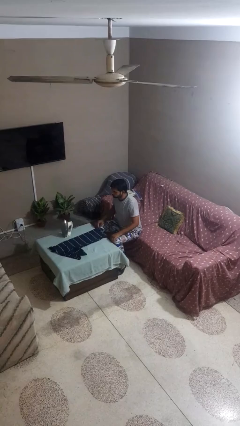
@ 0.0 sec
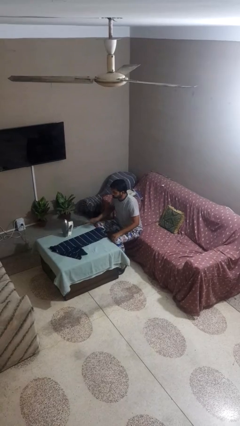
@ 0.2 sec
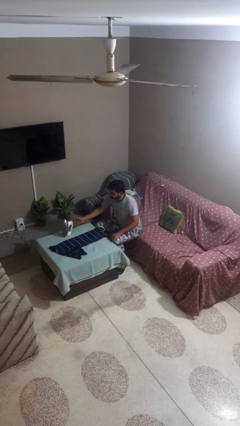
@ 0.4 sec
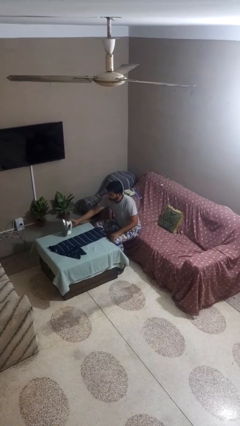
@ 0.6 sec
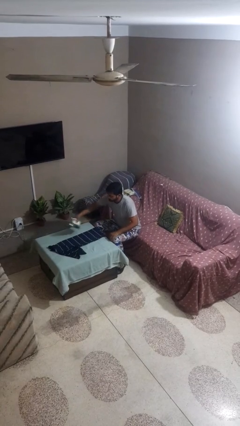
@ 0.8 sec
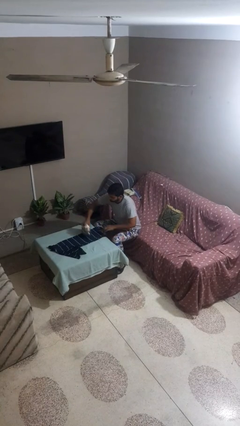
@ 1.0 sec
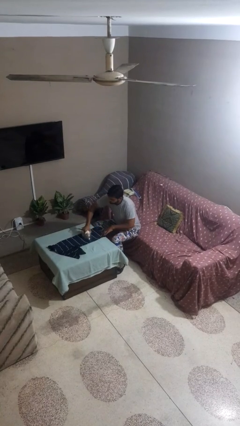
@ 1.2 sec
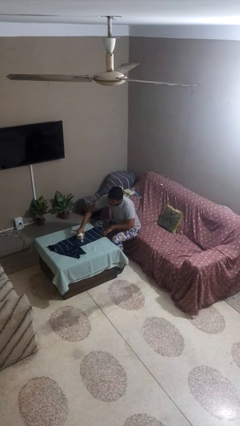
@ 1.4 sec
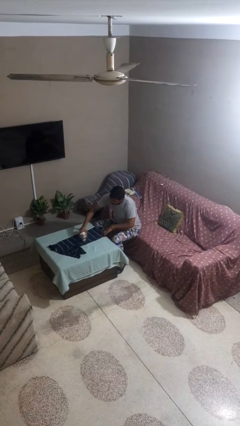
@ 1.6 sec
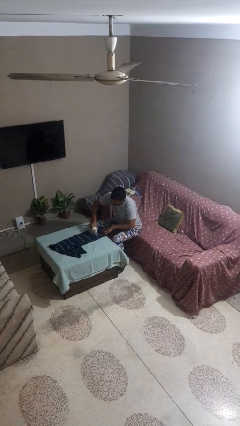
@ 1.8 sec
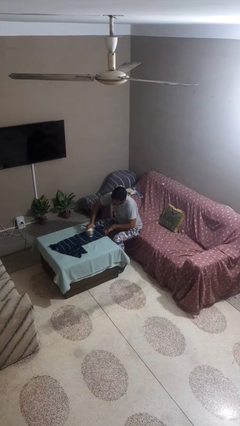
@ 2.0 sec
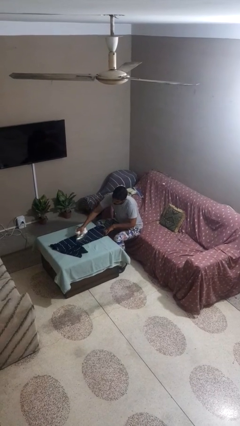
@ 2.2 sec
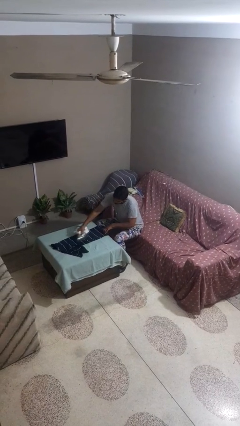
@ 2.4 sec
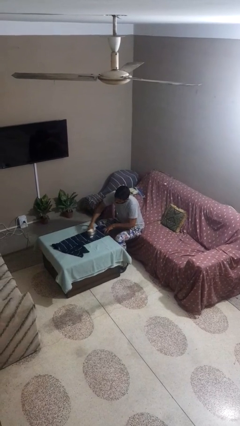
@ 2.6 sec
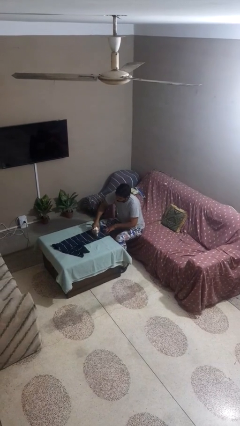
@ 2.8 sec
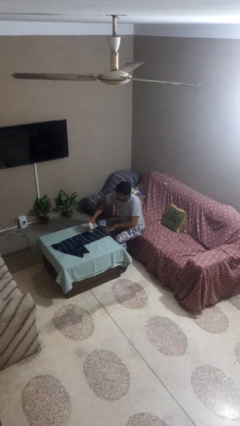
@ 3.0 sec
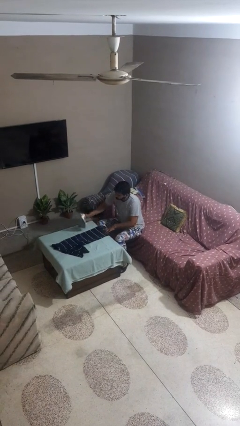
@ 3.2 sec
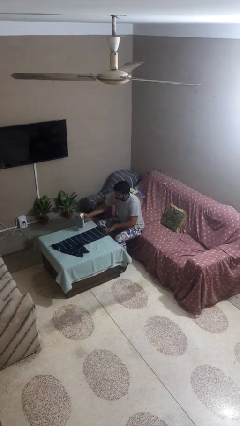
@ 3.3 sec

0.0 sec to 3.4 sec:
person irons clothes

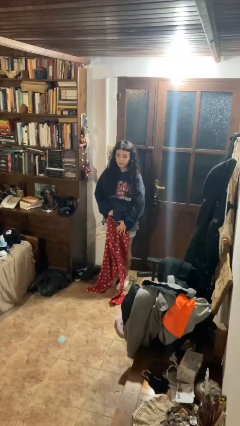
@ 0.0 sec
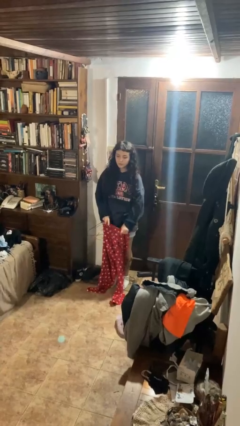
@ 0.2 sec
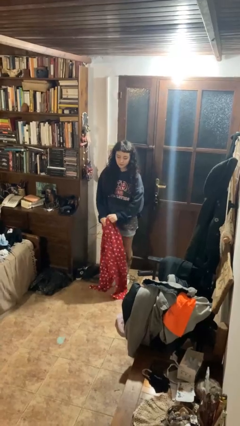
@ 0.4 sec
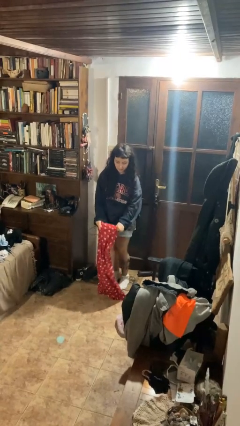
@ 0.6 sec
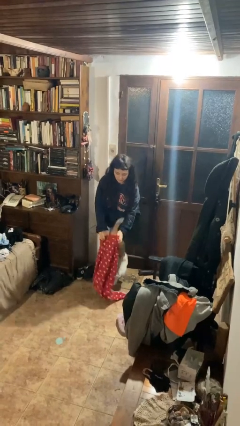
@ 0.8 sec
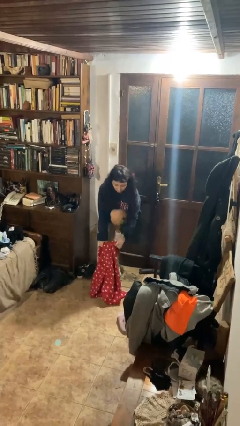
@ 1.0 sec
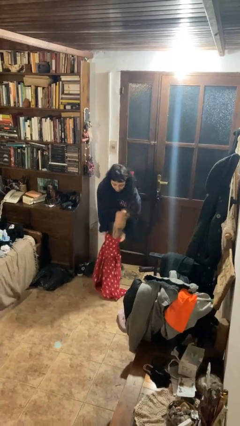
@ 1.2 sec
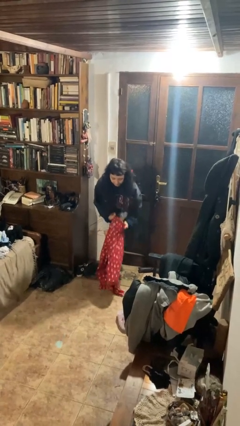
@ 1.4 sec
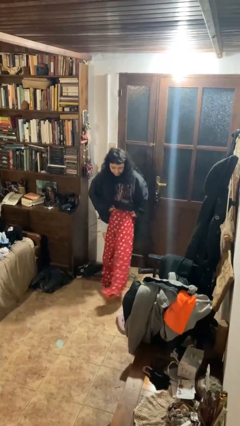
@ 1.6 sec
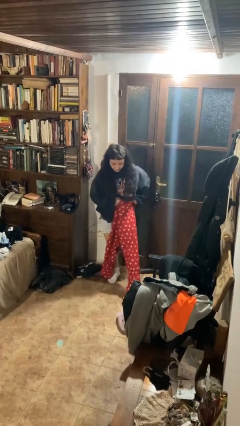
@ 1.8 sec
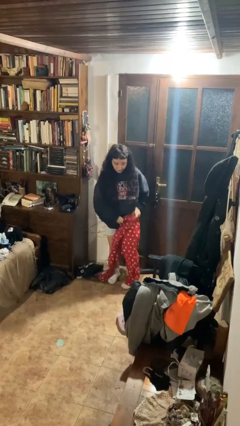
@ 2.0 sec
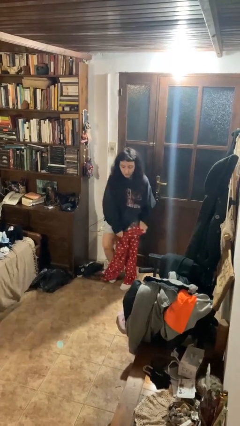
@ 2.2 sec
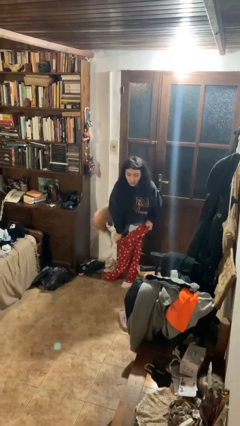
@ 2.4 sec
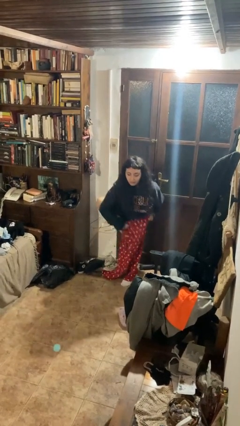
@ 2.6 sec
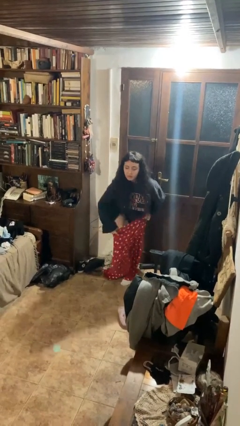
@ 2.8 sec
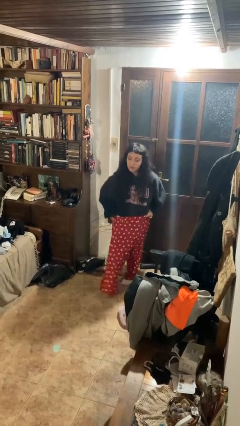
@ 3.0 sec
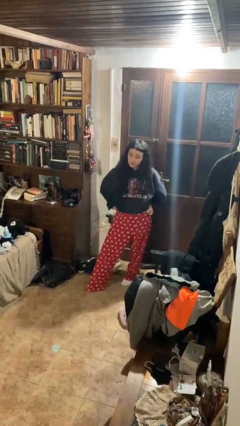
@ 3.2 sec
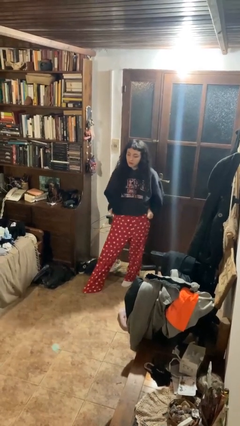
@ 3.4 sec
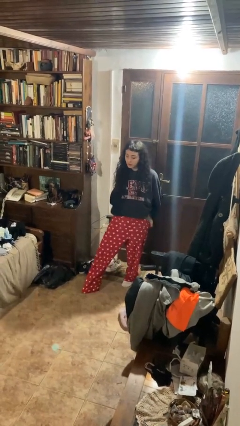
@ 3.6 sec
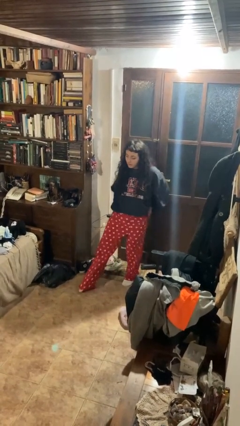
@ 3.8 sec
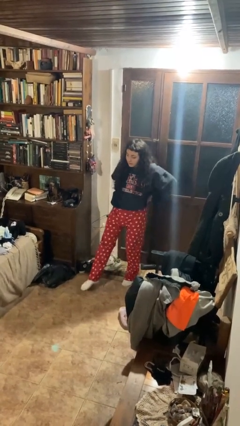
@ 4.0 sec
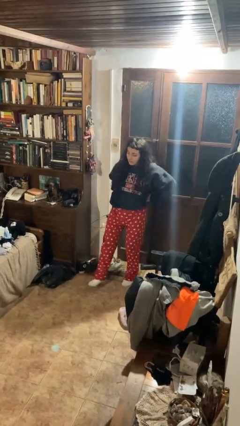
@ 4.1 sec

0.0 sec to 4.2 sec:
person puts on pants

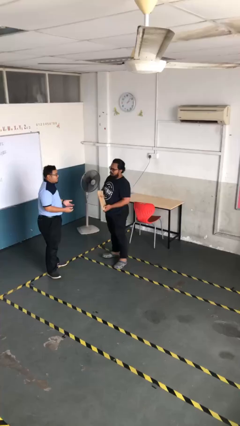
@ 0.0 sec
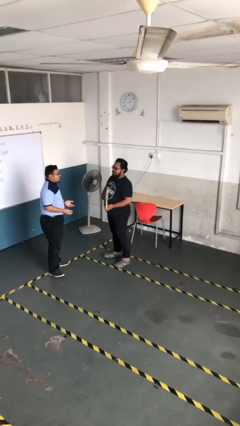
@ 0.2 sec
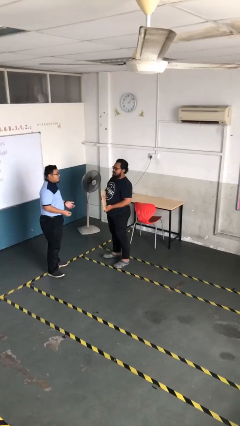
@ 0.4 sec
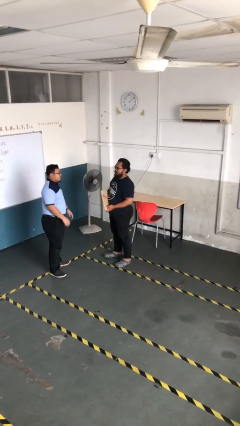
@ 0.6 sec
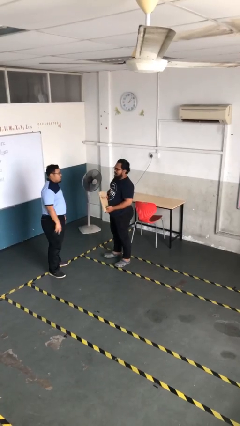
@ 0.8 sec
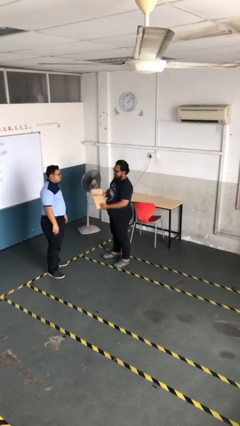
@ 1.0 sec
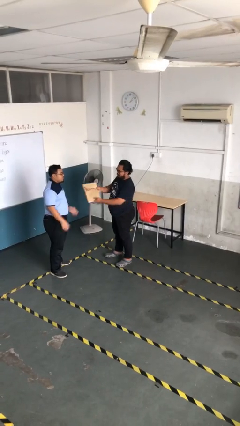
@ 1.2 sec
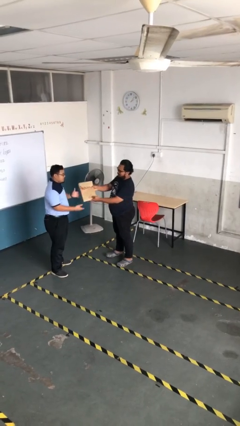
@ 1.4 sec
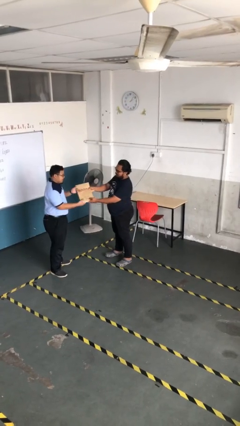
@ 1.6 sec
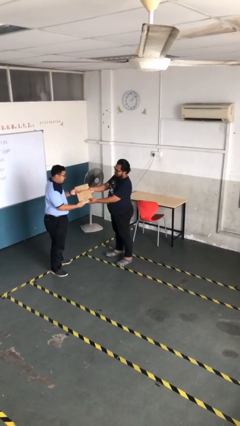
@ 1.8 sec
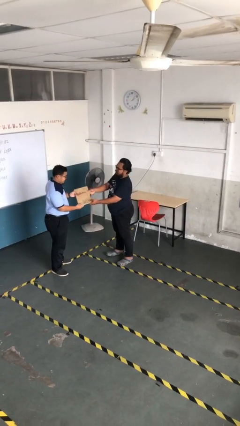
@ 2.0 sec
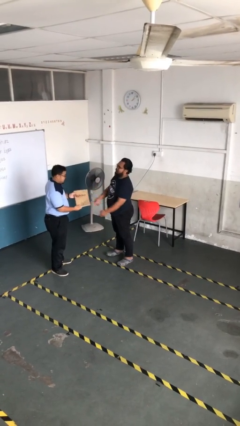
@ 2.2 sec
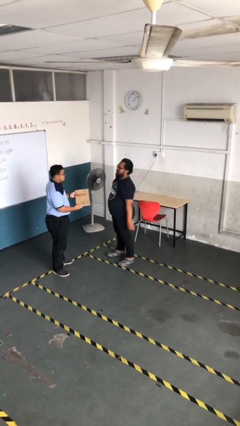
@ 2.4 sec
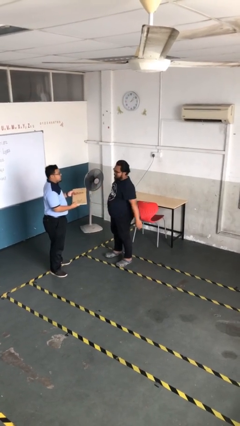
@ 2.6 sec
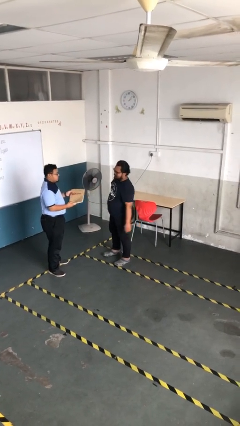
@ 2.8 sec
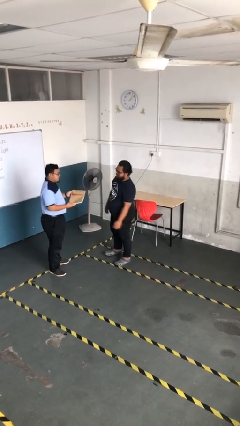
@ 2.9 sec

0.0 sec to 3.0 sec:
person transfers object to person

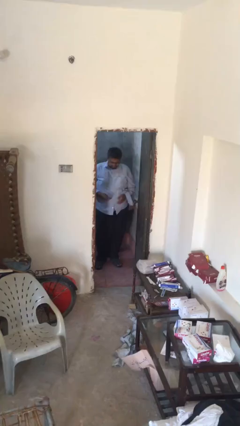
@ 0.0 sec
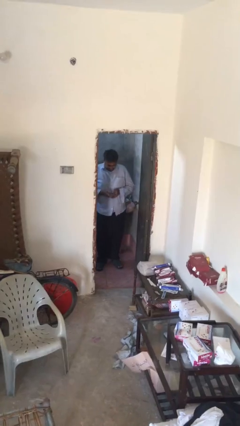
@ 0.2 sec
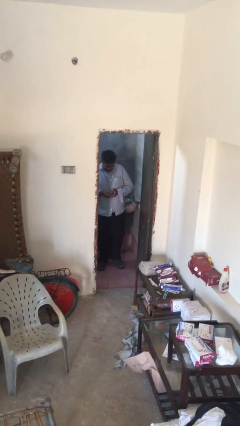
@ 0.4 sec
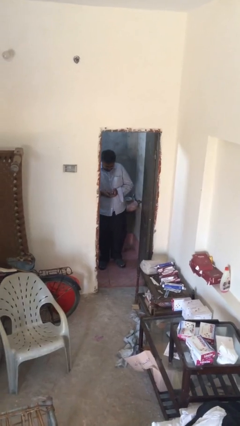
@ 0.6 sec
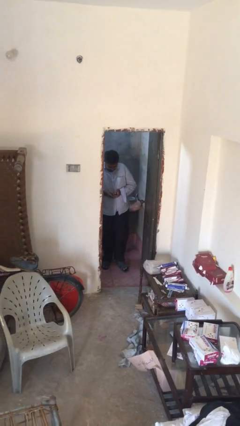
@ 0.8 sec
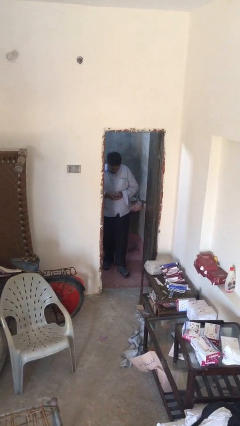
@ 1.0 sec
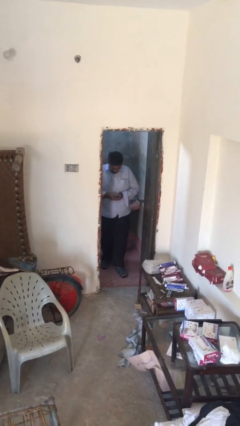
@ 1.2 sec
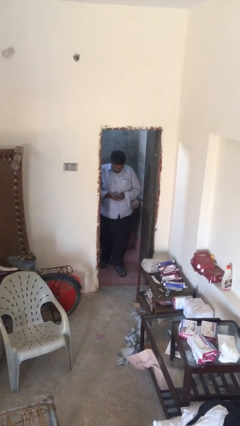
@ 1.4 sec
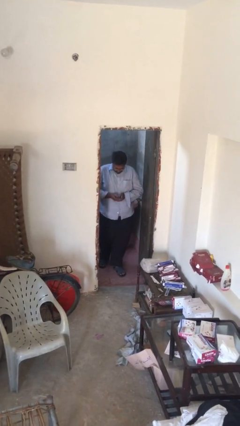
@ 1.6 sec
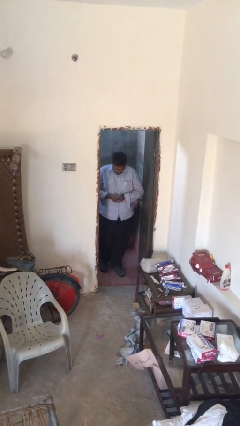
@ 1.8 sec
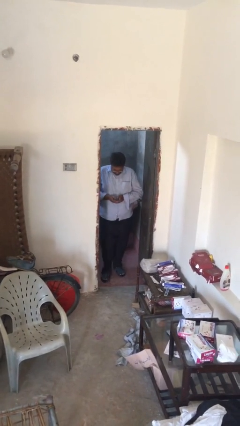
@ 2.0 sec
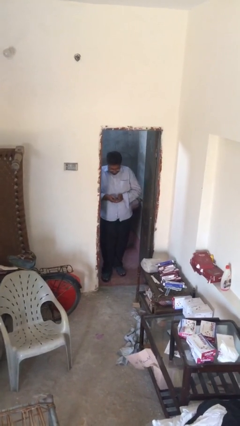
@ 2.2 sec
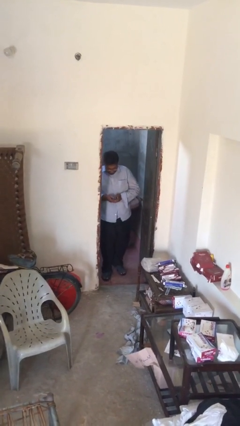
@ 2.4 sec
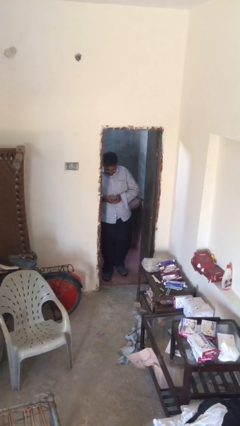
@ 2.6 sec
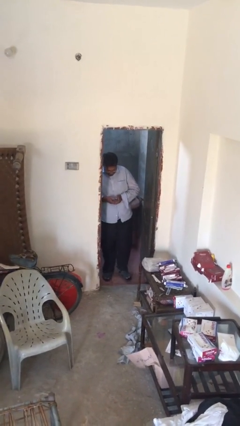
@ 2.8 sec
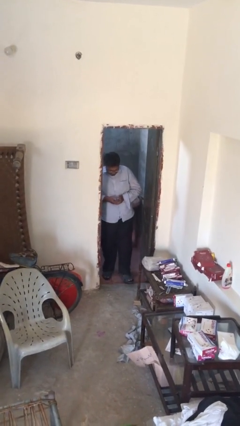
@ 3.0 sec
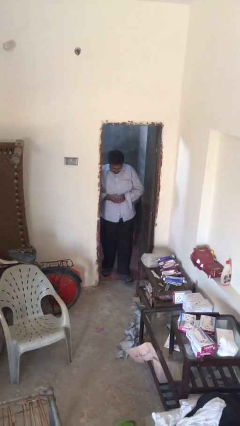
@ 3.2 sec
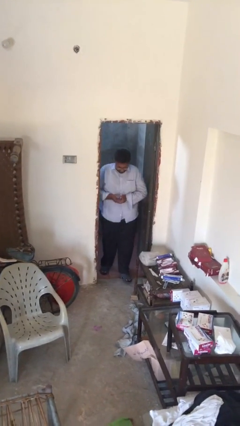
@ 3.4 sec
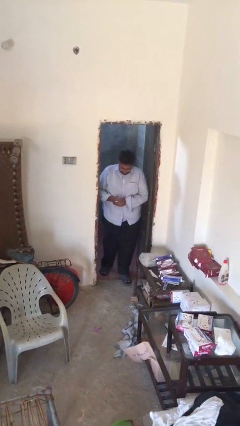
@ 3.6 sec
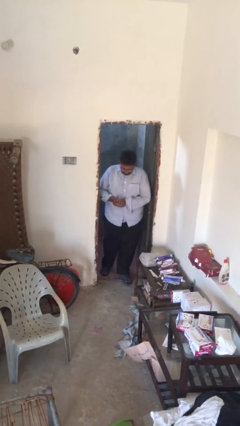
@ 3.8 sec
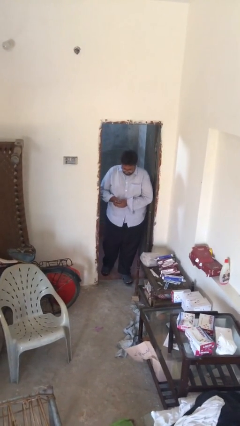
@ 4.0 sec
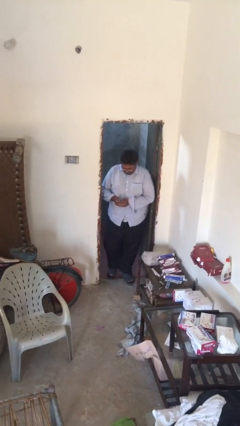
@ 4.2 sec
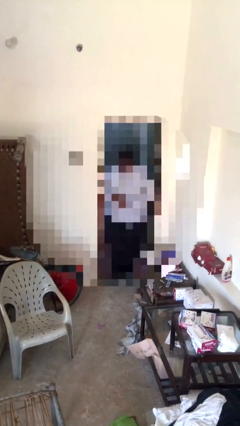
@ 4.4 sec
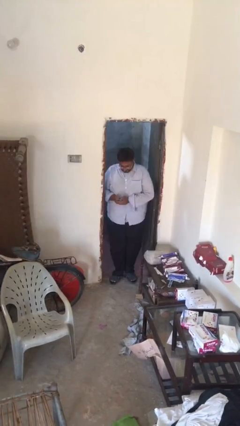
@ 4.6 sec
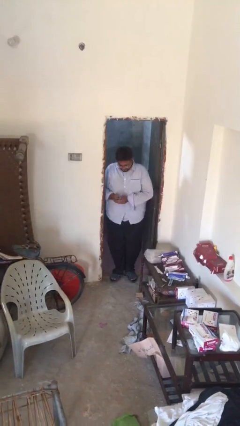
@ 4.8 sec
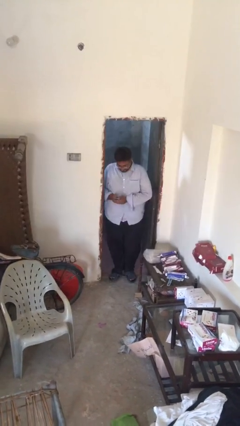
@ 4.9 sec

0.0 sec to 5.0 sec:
person texts on phone

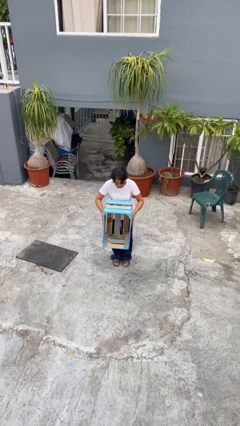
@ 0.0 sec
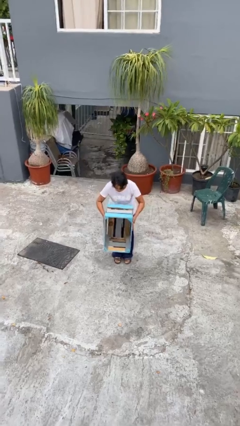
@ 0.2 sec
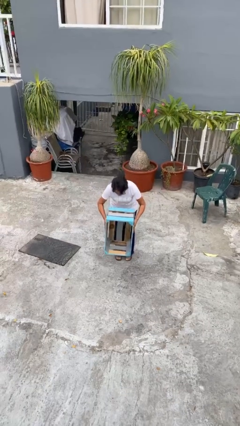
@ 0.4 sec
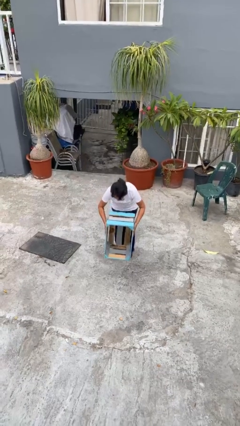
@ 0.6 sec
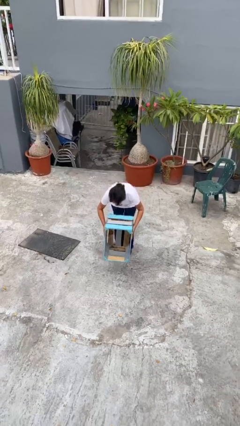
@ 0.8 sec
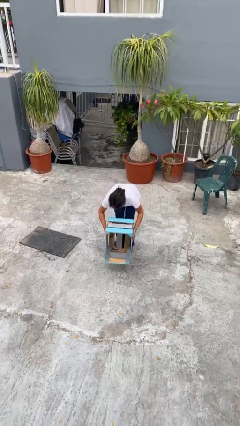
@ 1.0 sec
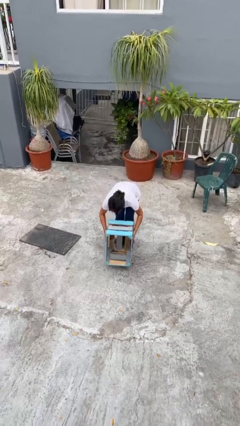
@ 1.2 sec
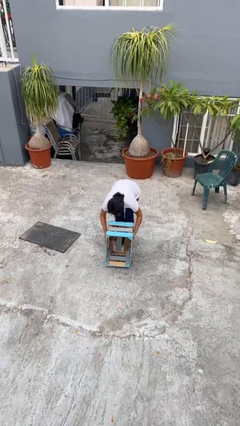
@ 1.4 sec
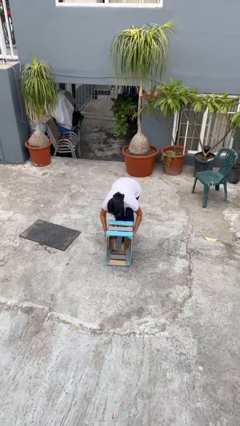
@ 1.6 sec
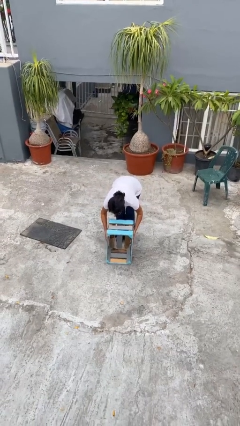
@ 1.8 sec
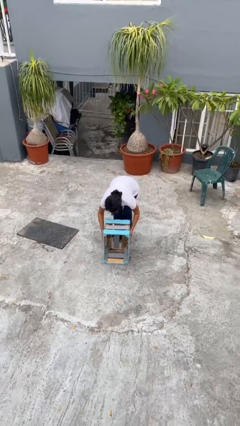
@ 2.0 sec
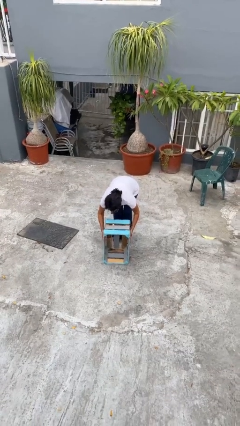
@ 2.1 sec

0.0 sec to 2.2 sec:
person puts down object on floor
